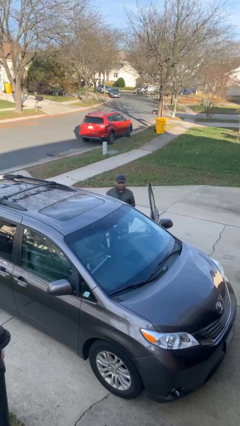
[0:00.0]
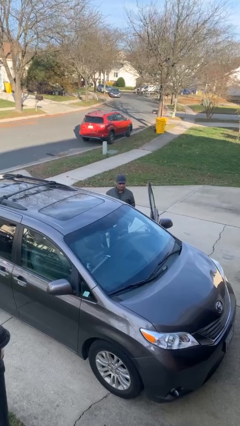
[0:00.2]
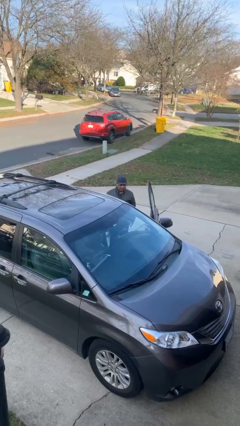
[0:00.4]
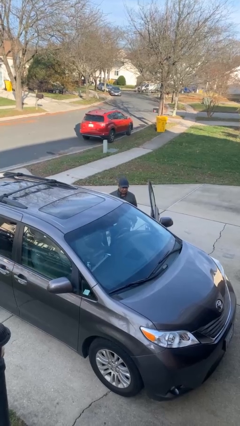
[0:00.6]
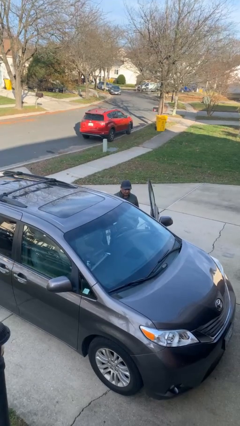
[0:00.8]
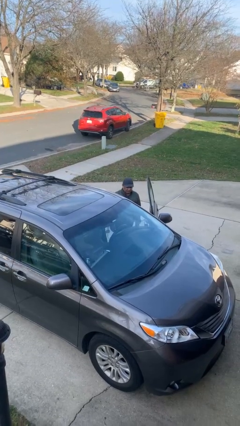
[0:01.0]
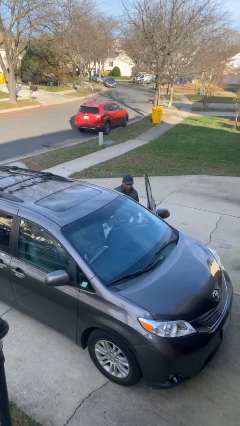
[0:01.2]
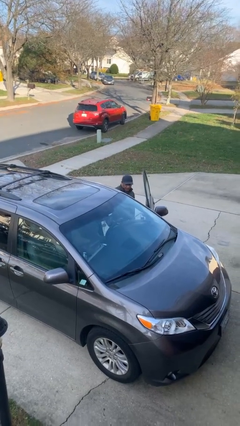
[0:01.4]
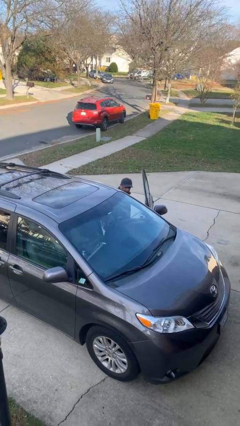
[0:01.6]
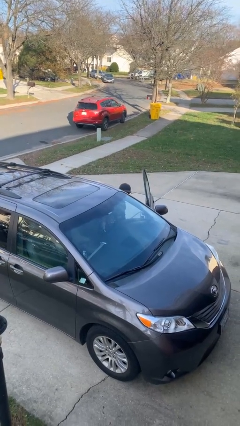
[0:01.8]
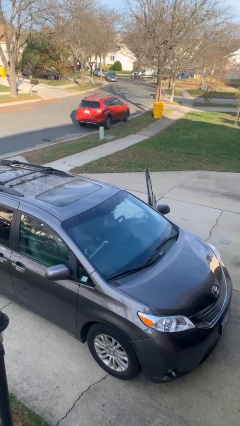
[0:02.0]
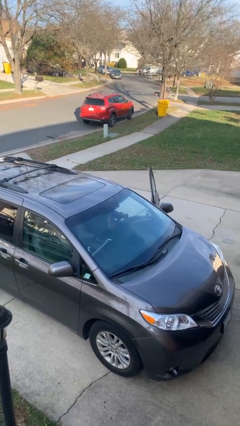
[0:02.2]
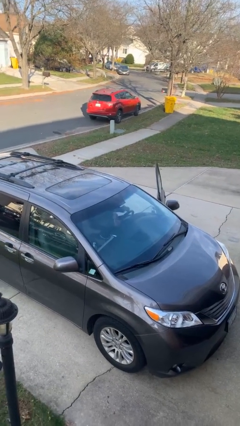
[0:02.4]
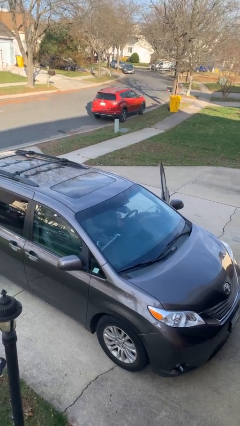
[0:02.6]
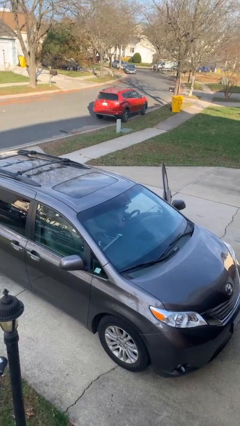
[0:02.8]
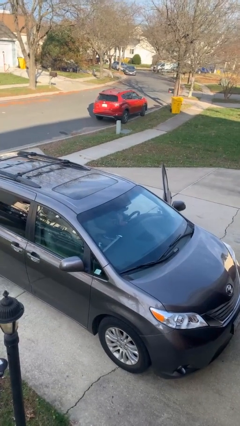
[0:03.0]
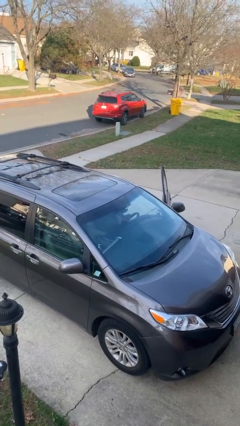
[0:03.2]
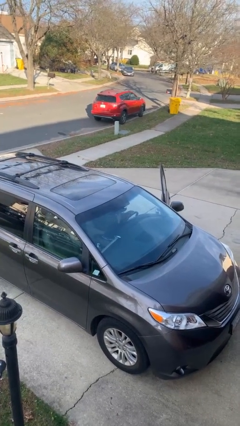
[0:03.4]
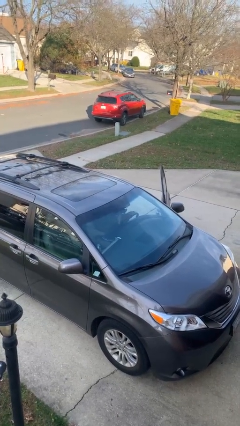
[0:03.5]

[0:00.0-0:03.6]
person enters car

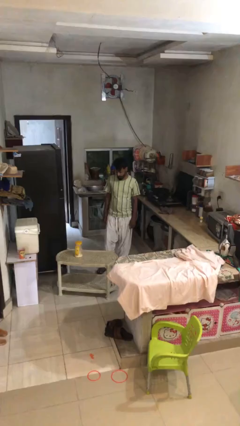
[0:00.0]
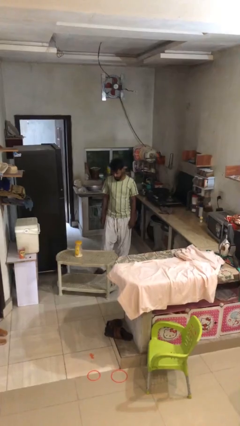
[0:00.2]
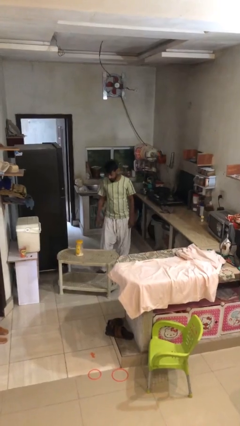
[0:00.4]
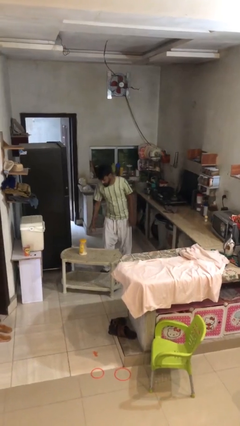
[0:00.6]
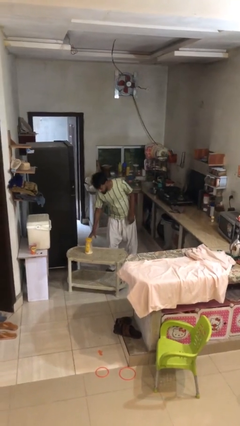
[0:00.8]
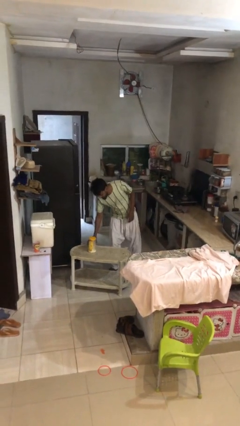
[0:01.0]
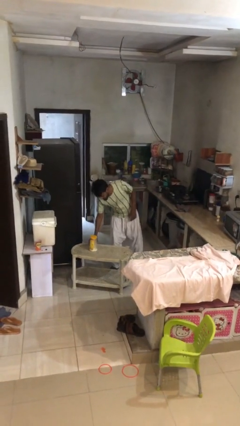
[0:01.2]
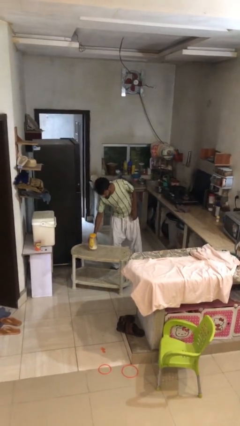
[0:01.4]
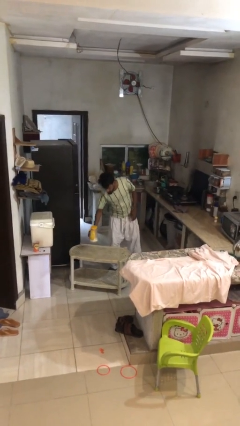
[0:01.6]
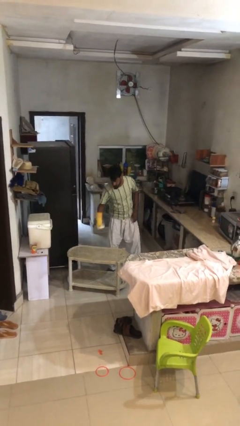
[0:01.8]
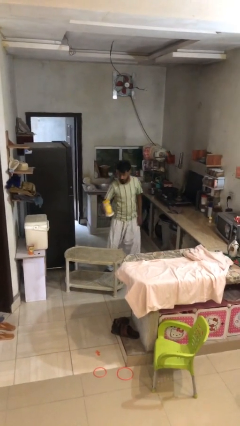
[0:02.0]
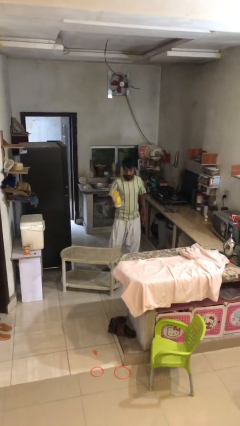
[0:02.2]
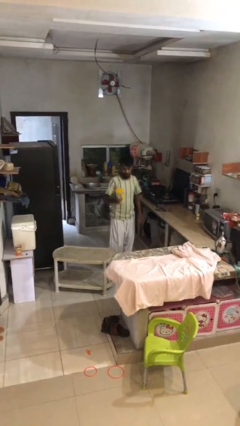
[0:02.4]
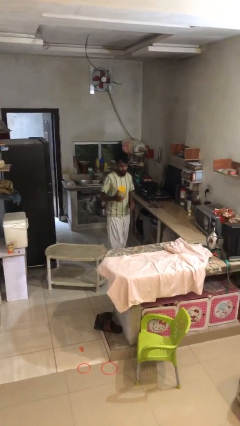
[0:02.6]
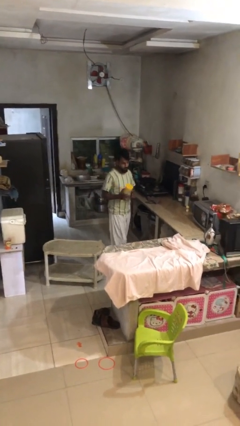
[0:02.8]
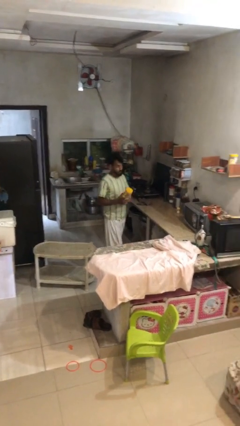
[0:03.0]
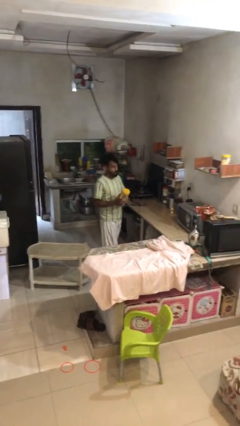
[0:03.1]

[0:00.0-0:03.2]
person picks up object from table

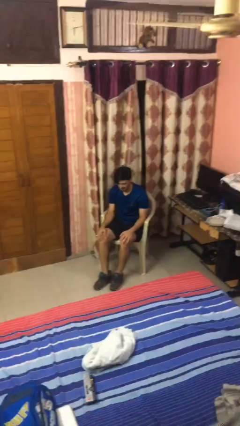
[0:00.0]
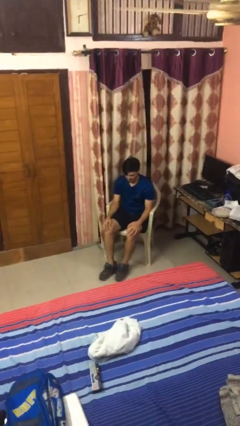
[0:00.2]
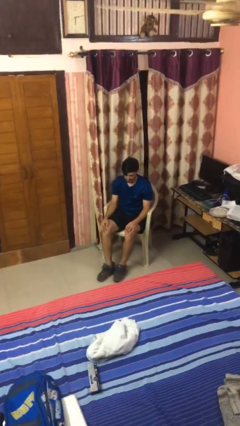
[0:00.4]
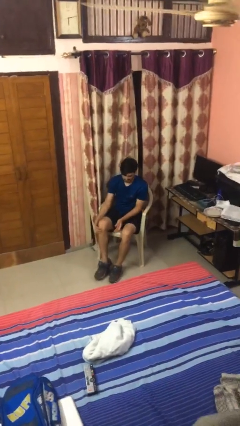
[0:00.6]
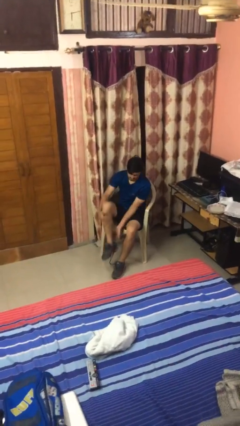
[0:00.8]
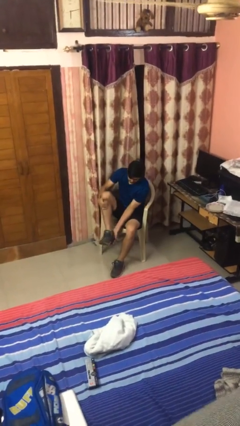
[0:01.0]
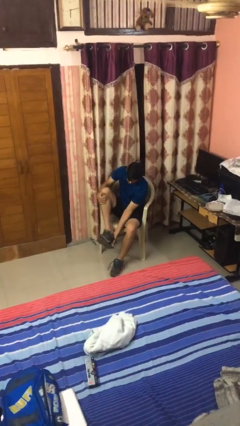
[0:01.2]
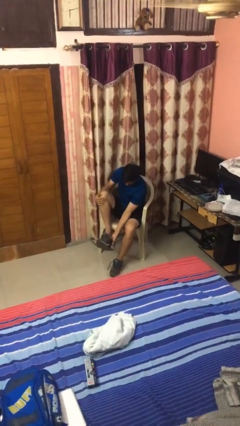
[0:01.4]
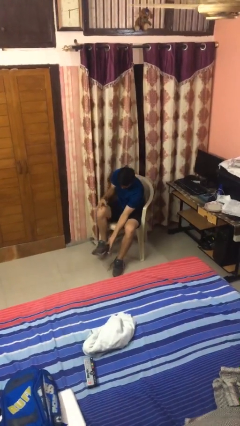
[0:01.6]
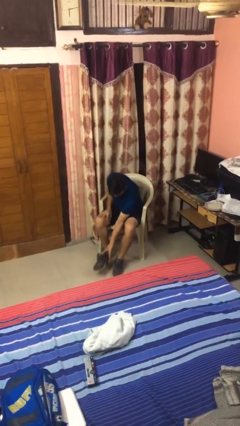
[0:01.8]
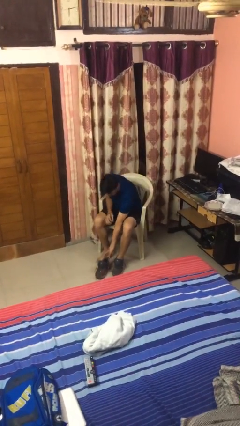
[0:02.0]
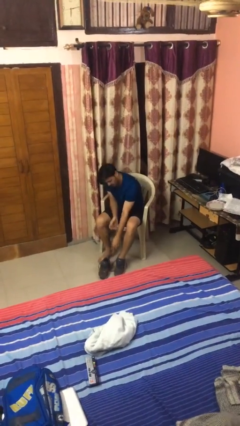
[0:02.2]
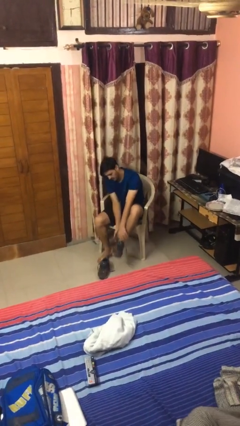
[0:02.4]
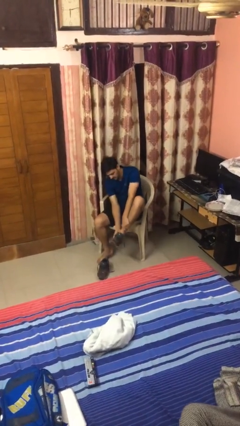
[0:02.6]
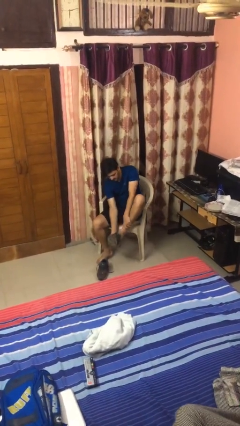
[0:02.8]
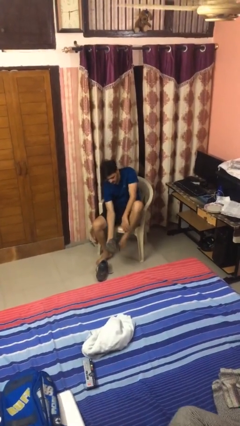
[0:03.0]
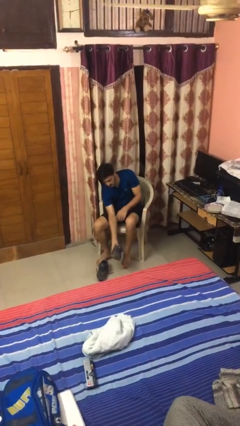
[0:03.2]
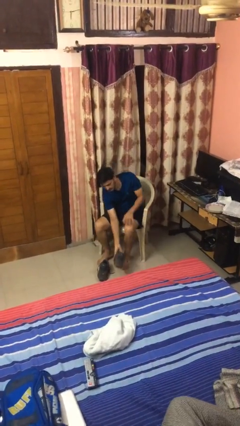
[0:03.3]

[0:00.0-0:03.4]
person takes off boots

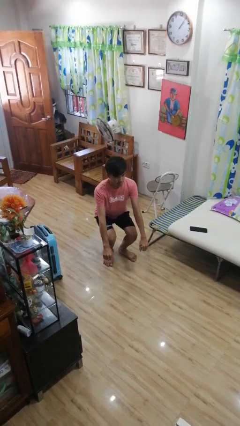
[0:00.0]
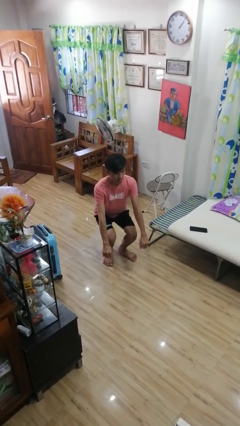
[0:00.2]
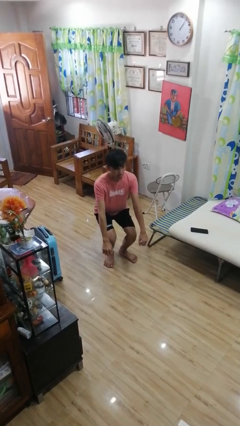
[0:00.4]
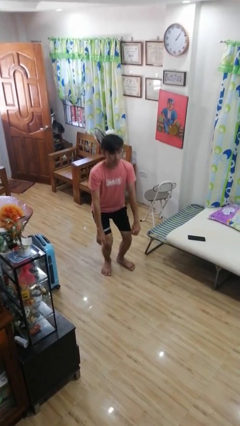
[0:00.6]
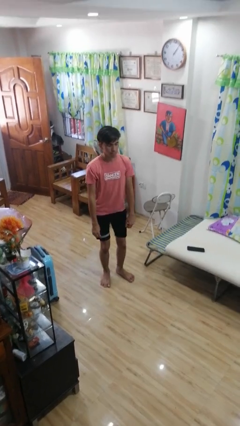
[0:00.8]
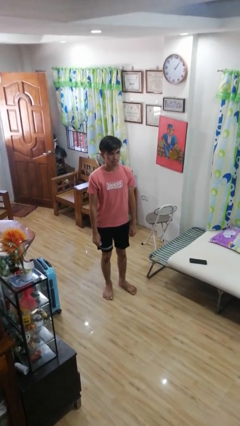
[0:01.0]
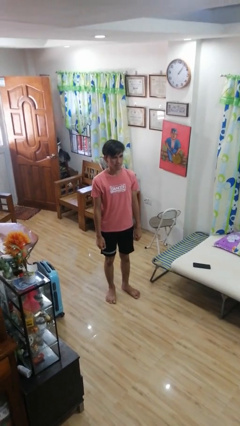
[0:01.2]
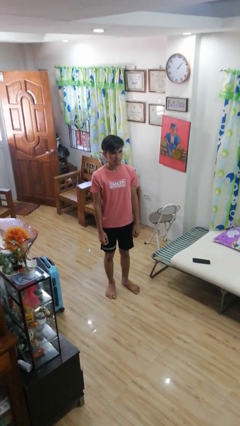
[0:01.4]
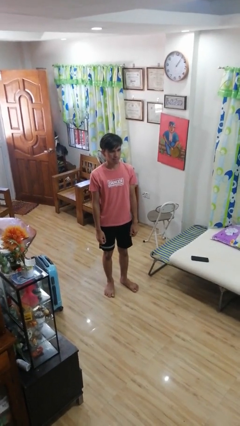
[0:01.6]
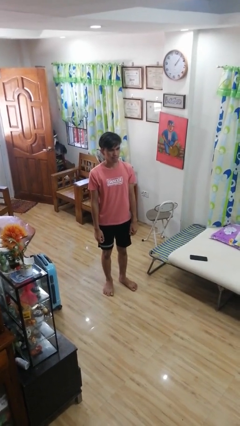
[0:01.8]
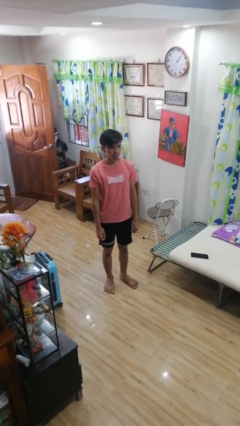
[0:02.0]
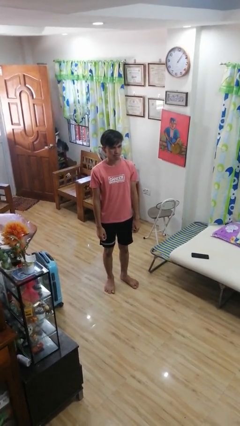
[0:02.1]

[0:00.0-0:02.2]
person stands up

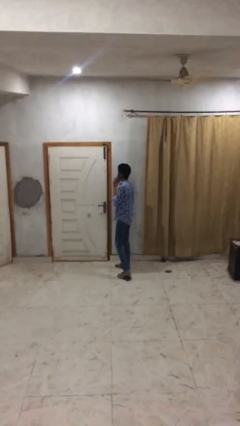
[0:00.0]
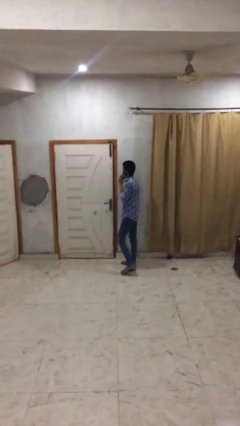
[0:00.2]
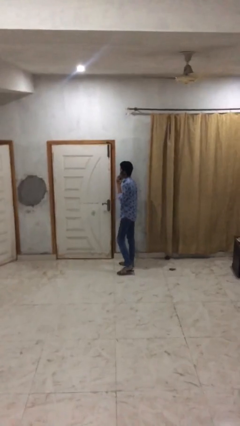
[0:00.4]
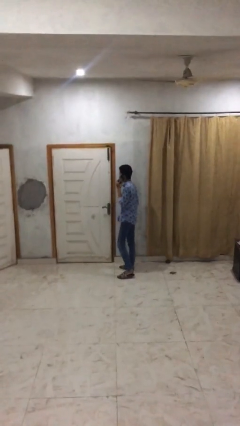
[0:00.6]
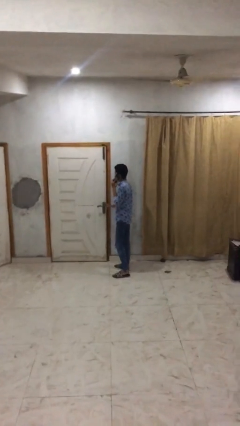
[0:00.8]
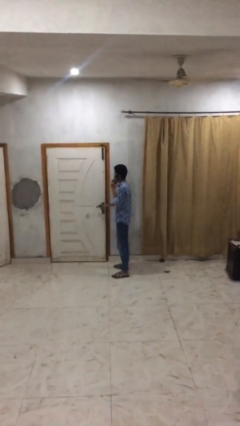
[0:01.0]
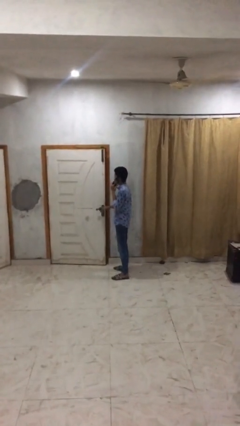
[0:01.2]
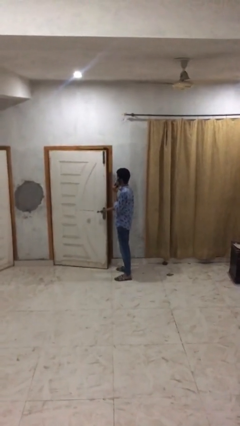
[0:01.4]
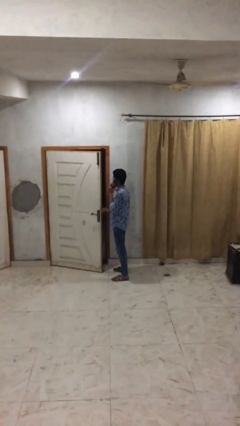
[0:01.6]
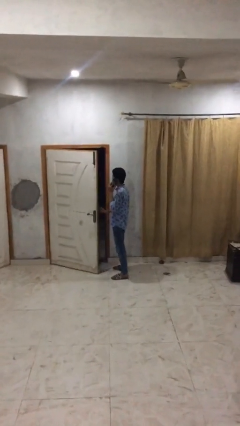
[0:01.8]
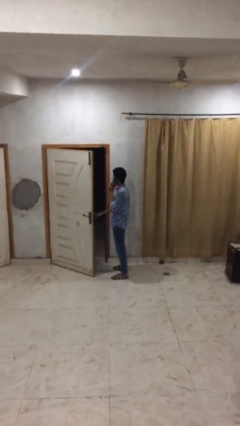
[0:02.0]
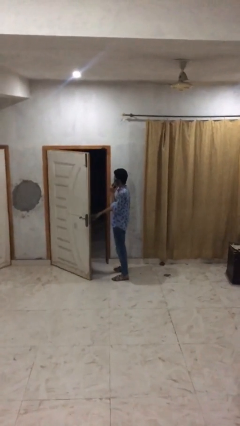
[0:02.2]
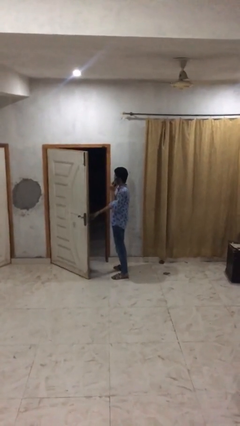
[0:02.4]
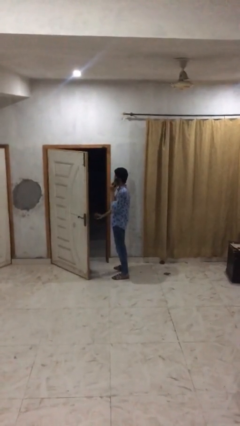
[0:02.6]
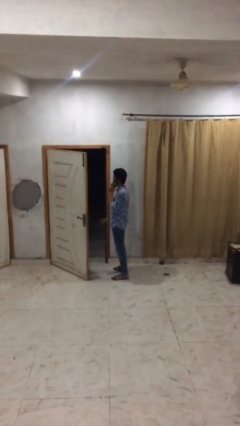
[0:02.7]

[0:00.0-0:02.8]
person opens facility door

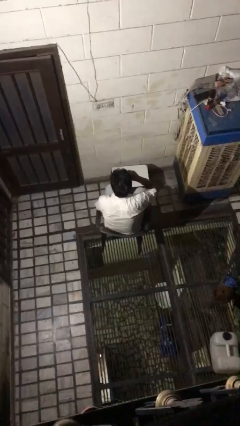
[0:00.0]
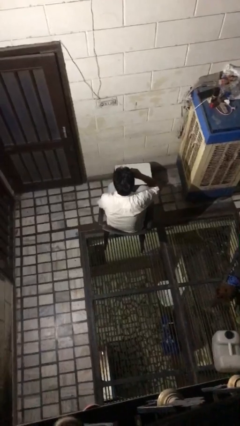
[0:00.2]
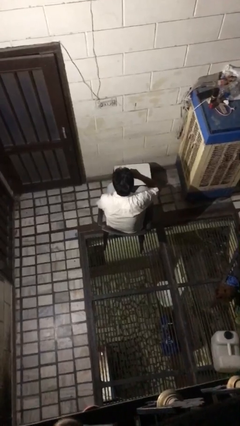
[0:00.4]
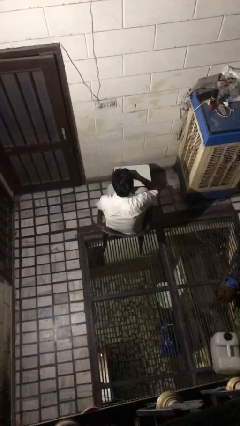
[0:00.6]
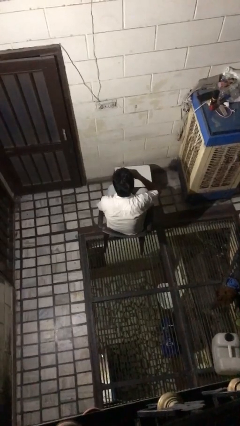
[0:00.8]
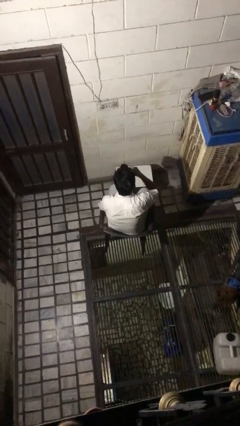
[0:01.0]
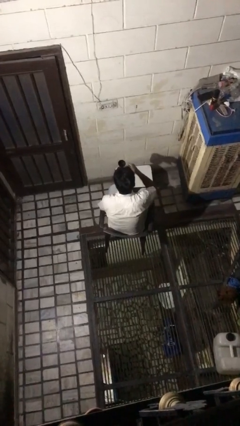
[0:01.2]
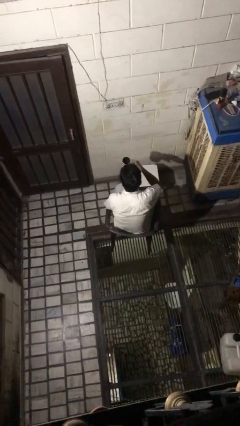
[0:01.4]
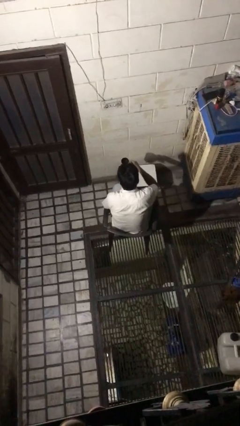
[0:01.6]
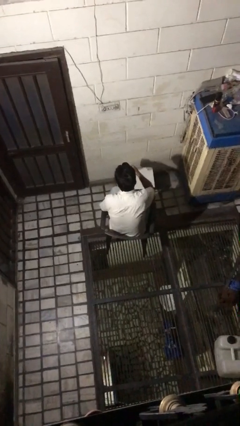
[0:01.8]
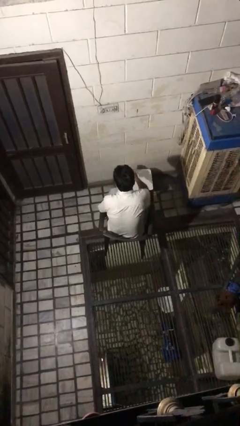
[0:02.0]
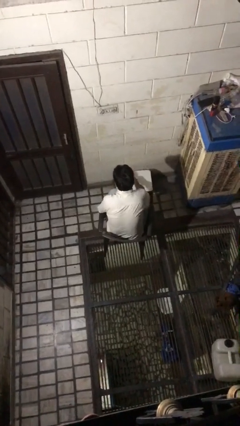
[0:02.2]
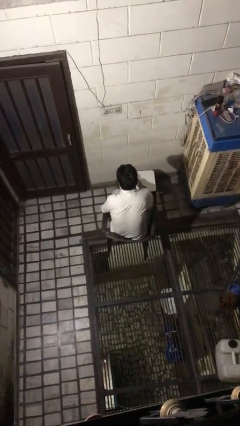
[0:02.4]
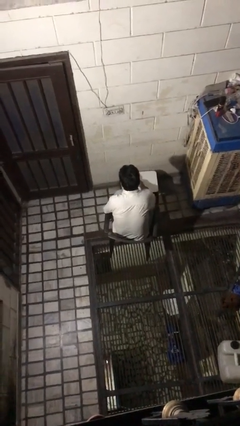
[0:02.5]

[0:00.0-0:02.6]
person puts down object on table
